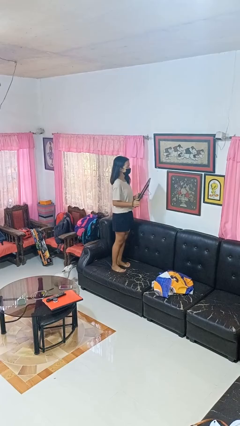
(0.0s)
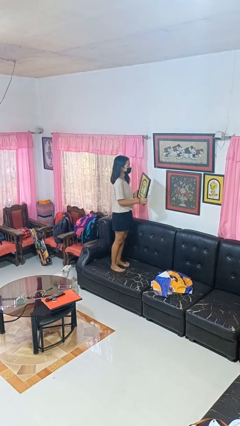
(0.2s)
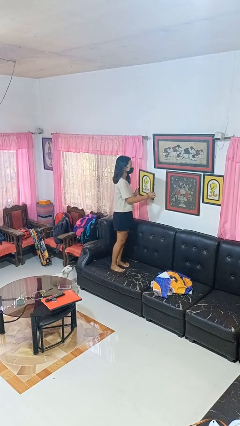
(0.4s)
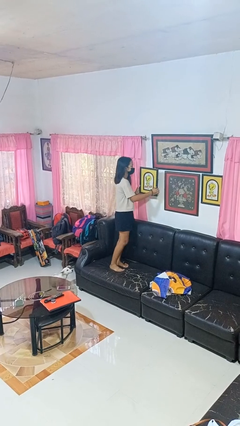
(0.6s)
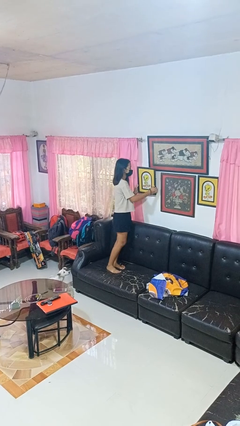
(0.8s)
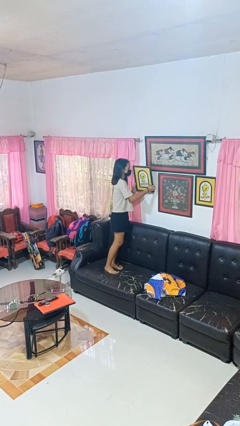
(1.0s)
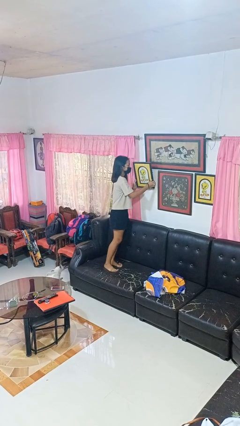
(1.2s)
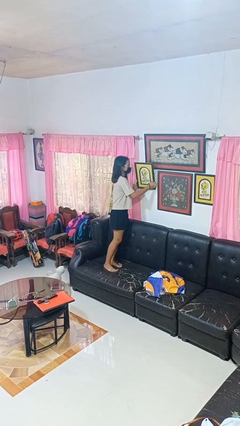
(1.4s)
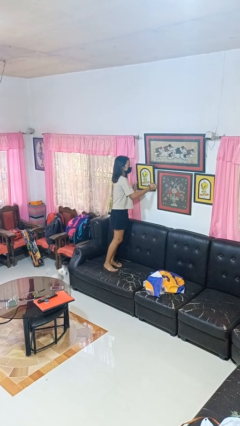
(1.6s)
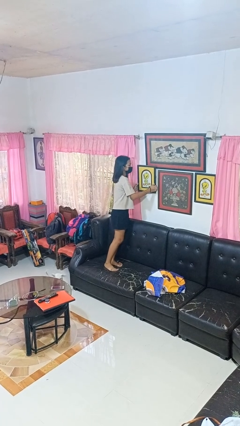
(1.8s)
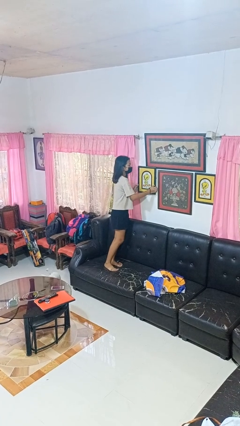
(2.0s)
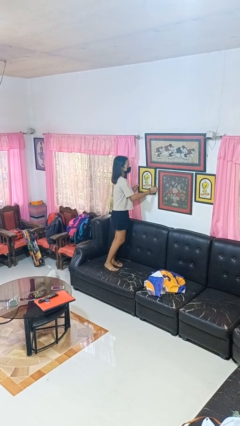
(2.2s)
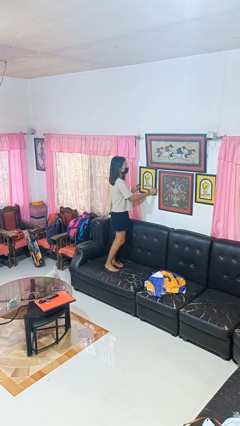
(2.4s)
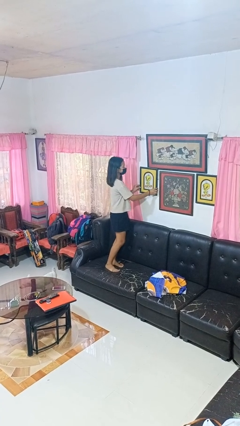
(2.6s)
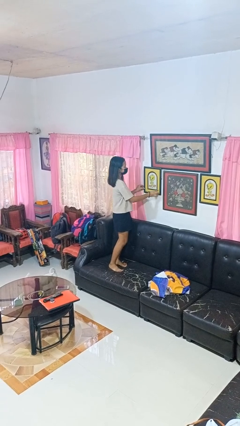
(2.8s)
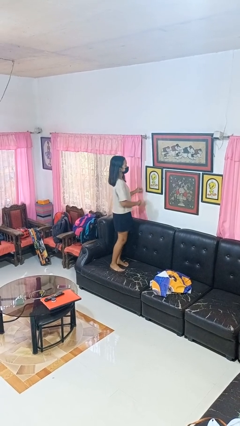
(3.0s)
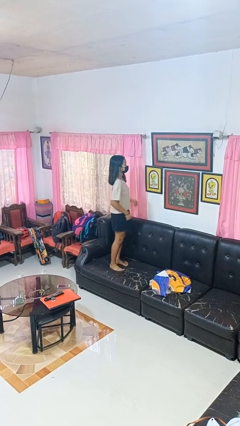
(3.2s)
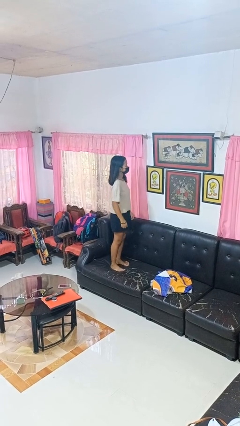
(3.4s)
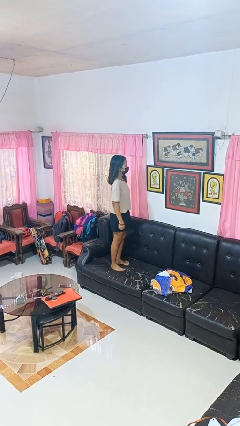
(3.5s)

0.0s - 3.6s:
person puts up picture frame

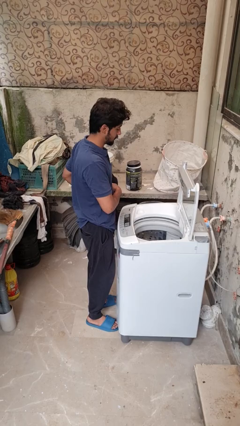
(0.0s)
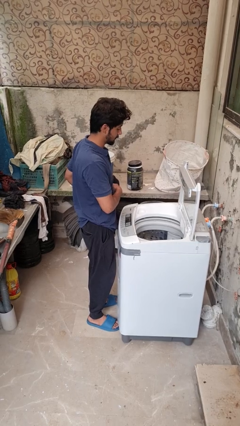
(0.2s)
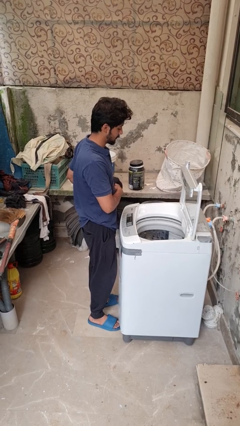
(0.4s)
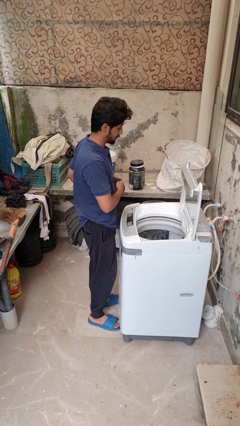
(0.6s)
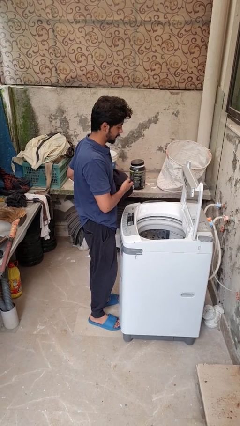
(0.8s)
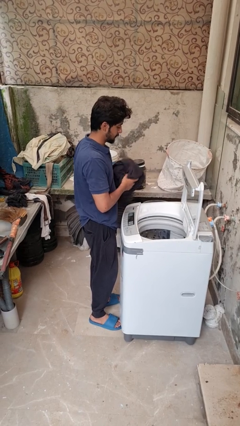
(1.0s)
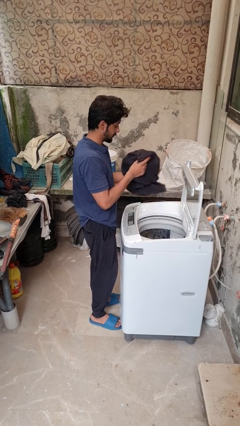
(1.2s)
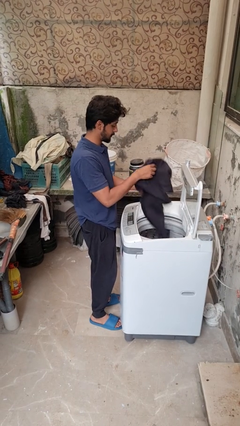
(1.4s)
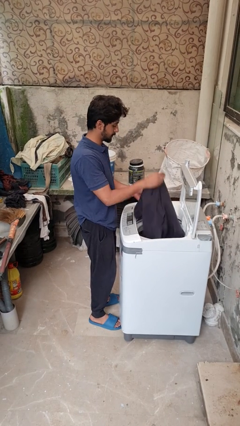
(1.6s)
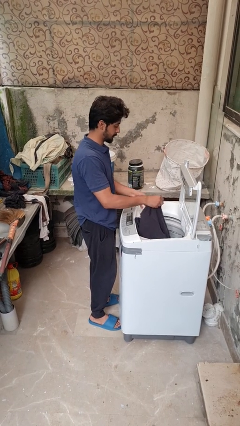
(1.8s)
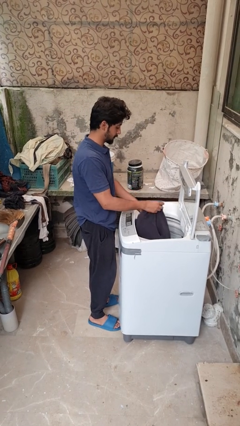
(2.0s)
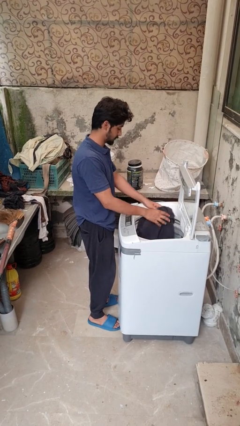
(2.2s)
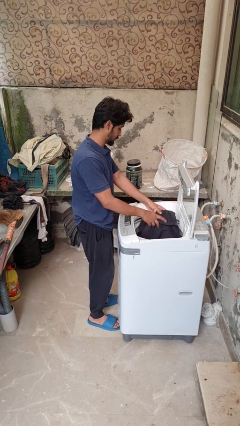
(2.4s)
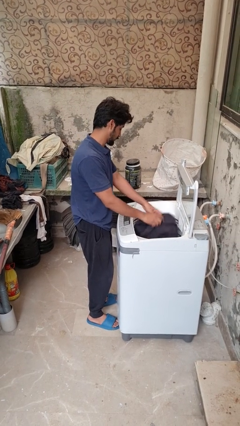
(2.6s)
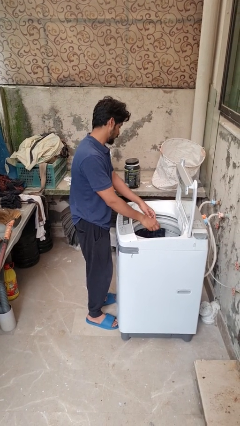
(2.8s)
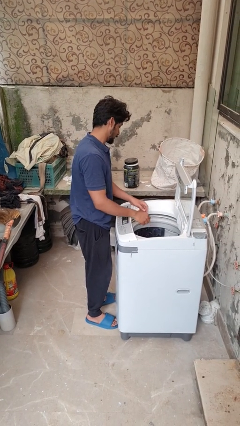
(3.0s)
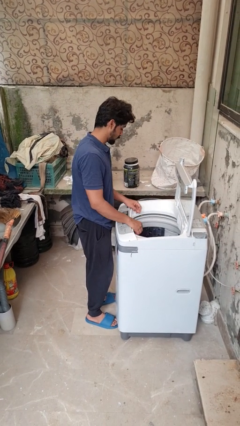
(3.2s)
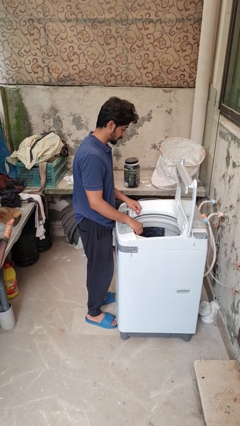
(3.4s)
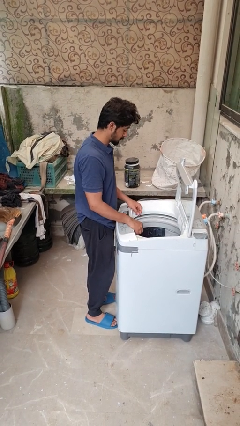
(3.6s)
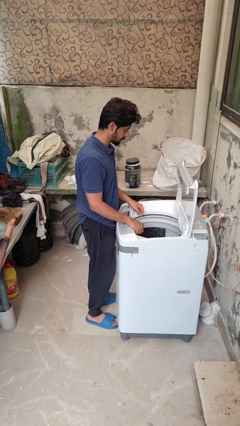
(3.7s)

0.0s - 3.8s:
person loads dryer

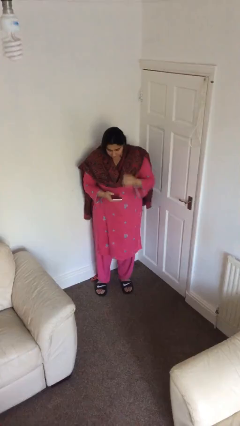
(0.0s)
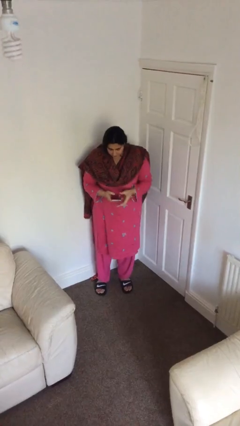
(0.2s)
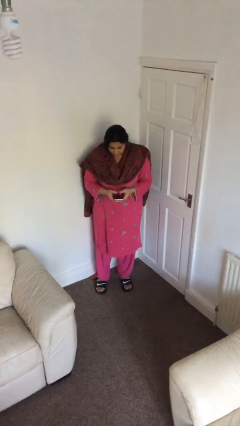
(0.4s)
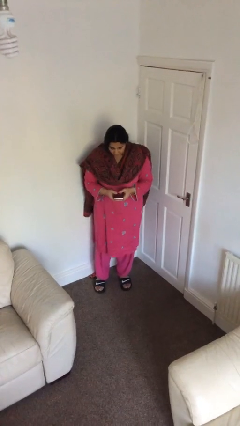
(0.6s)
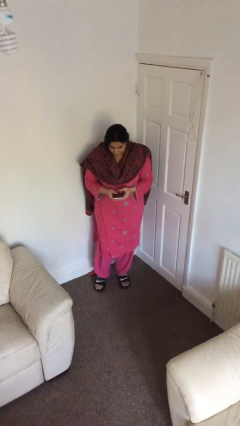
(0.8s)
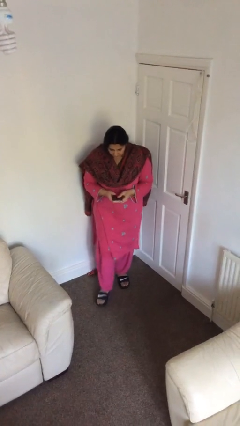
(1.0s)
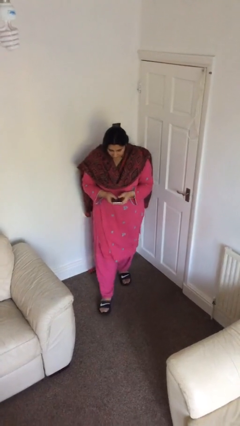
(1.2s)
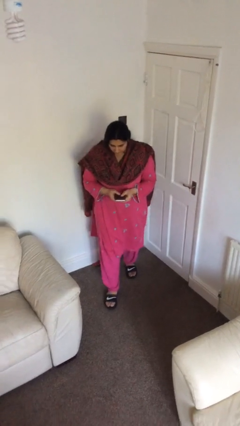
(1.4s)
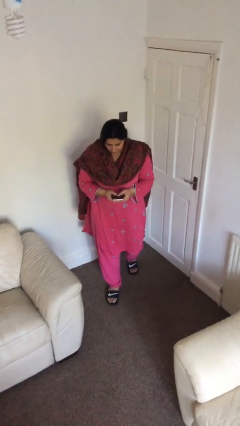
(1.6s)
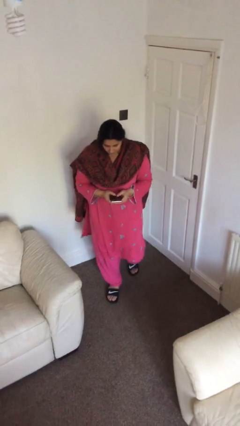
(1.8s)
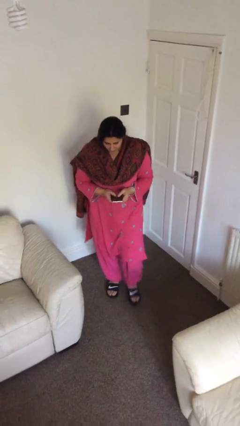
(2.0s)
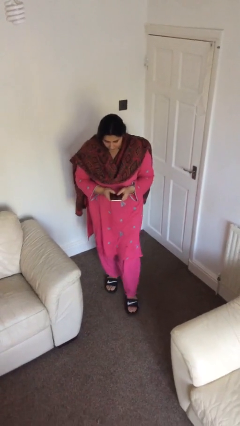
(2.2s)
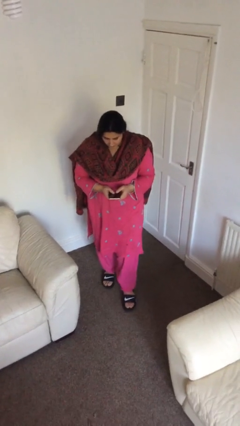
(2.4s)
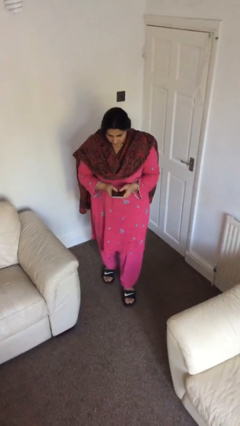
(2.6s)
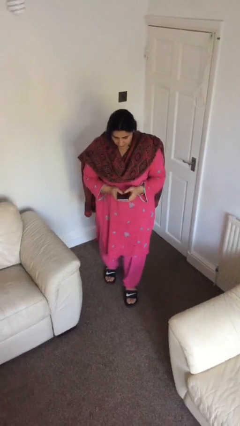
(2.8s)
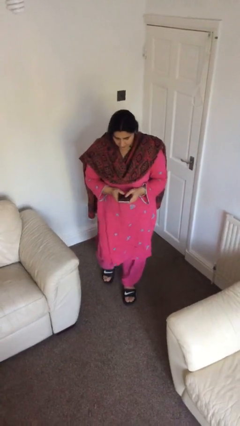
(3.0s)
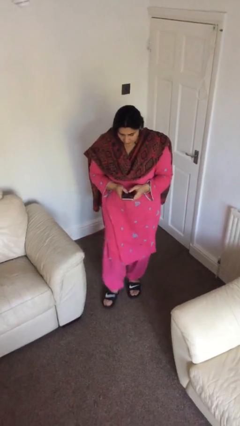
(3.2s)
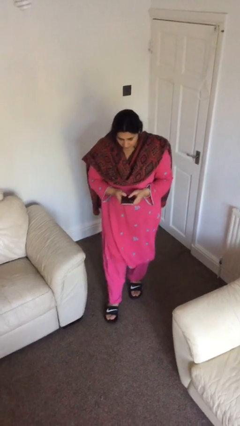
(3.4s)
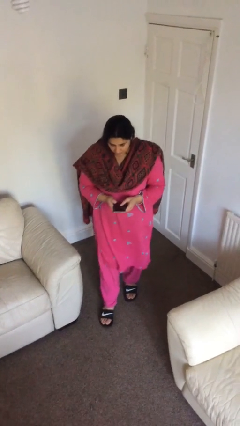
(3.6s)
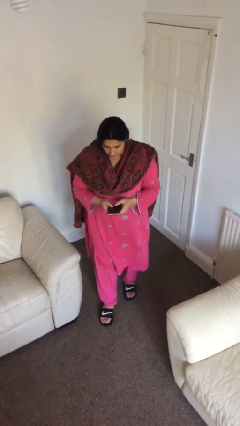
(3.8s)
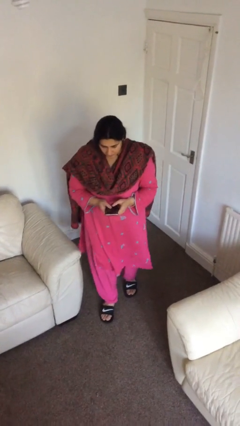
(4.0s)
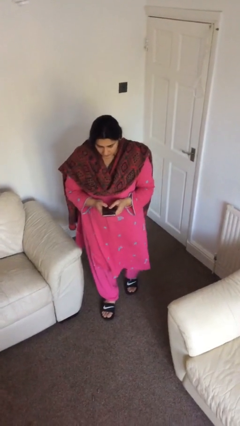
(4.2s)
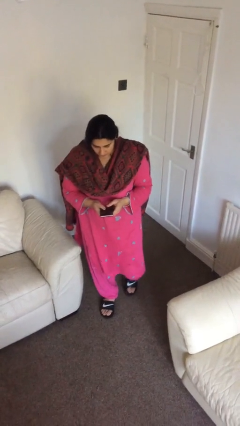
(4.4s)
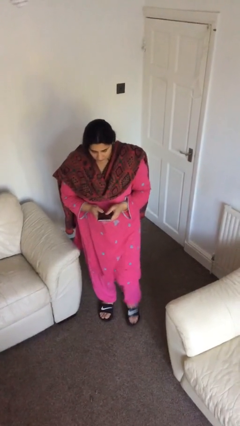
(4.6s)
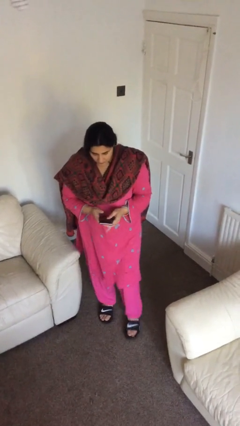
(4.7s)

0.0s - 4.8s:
person texts on phone

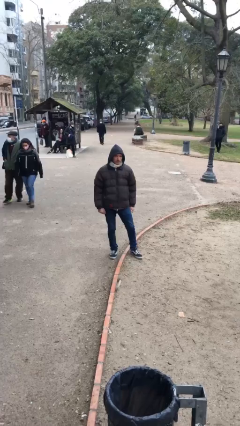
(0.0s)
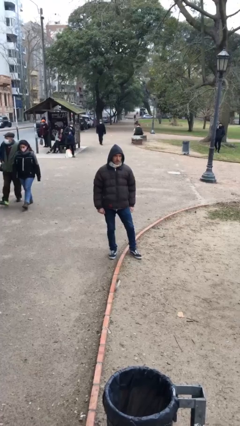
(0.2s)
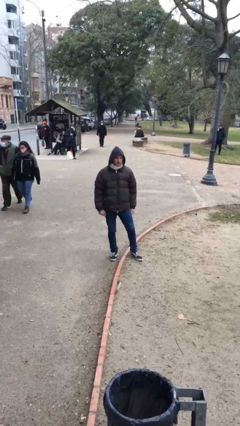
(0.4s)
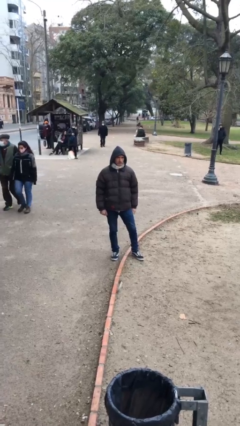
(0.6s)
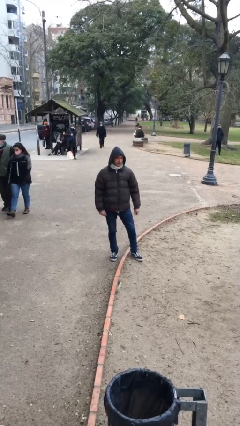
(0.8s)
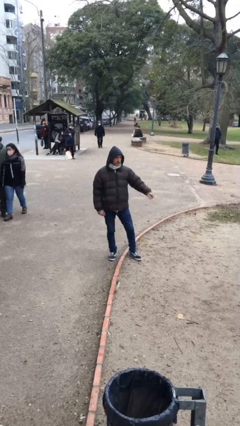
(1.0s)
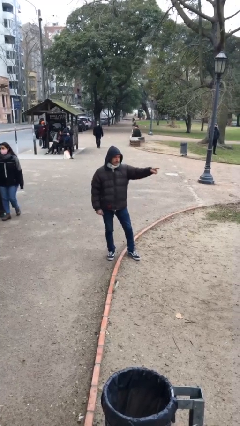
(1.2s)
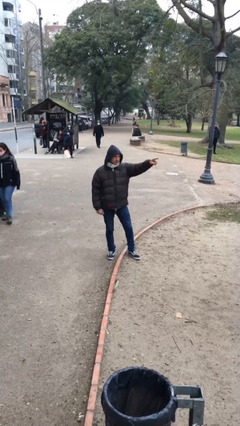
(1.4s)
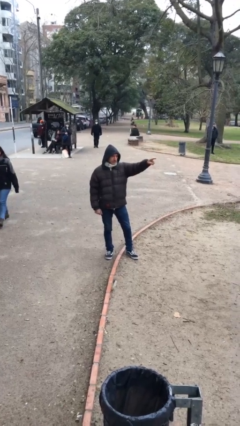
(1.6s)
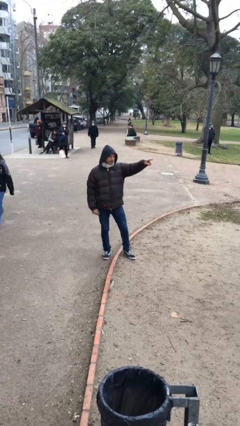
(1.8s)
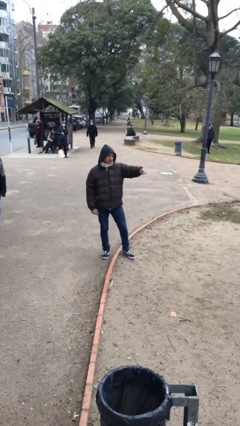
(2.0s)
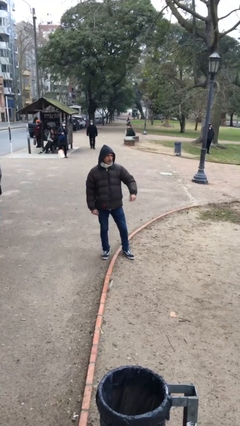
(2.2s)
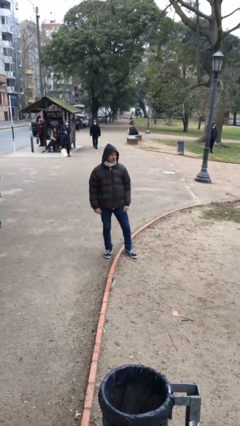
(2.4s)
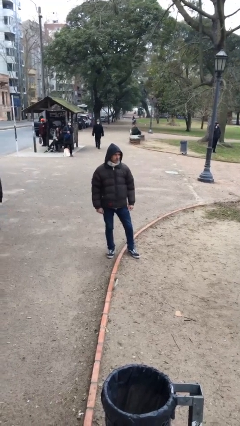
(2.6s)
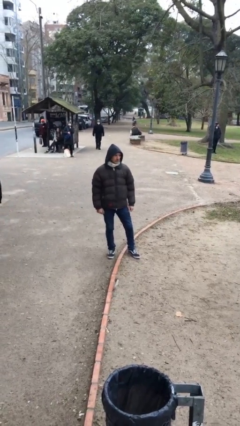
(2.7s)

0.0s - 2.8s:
person points at person

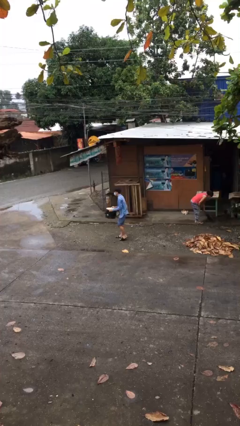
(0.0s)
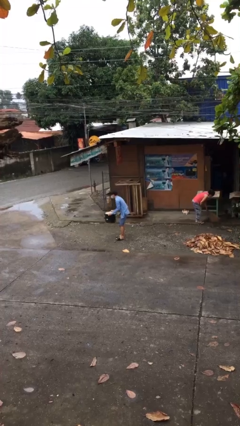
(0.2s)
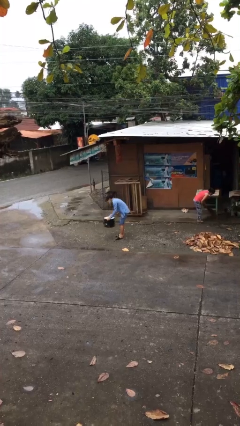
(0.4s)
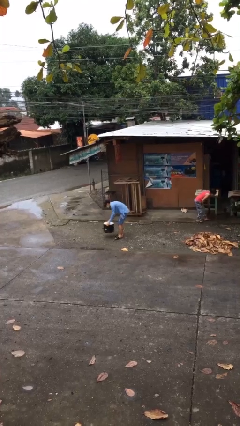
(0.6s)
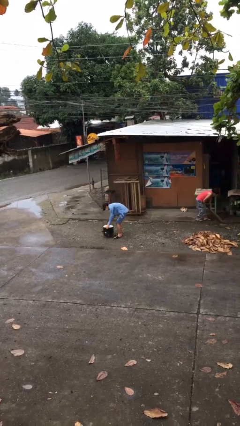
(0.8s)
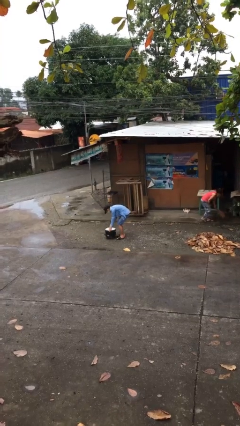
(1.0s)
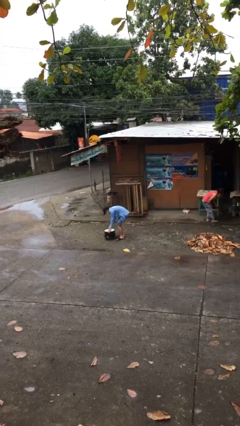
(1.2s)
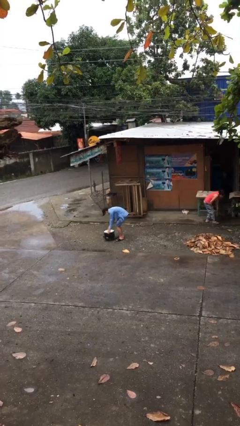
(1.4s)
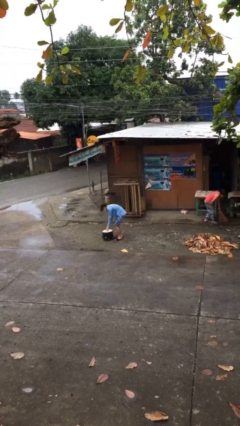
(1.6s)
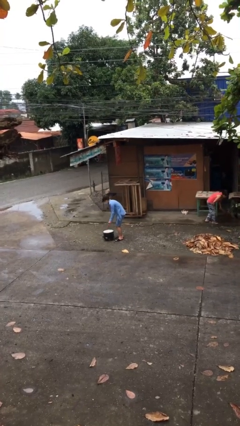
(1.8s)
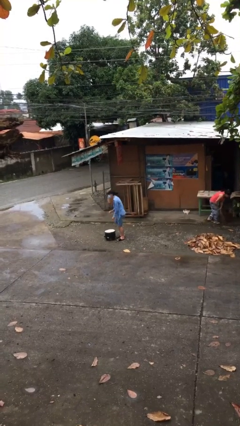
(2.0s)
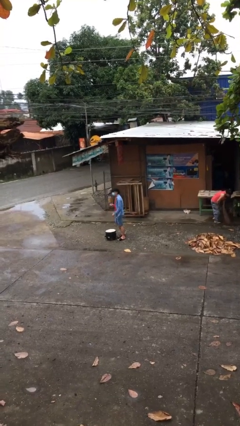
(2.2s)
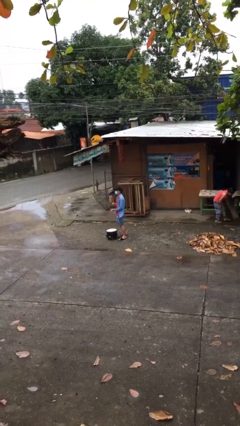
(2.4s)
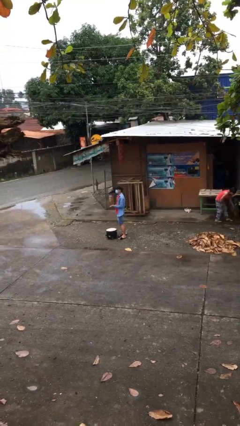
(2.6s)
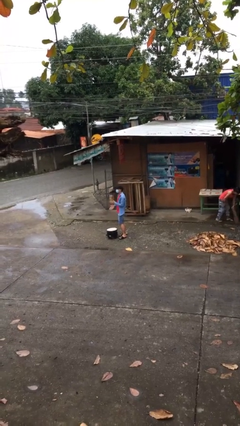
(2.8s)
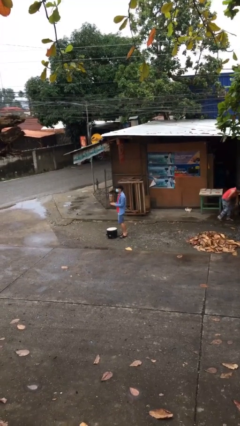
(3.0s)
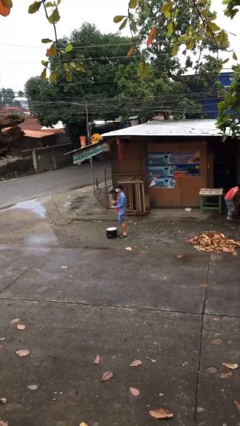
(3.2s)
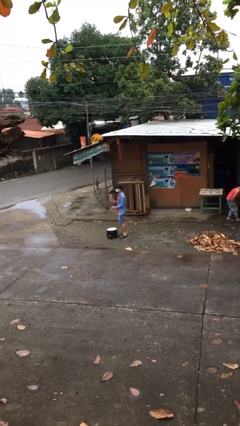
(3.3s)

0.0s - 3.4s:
person puts down object on floor
